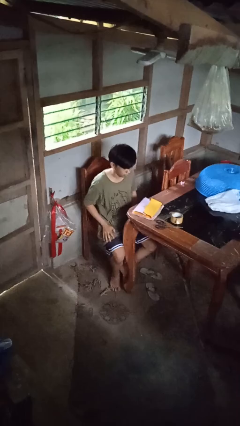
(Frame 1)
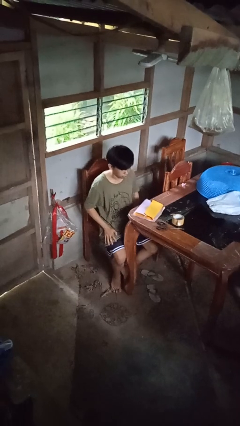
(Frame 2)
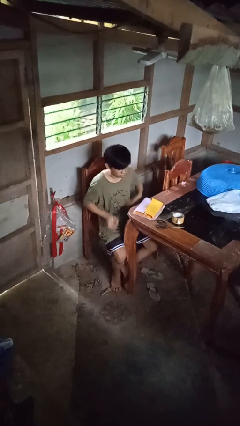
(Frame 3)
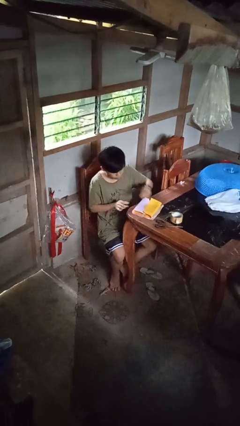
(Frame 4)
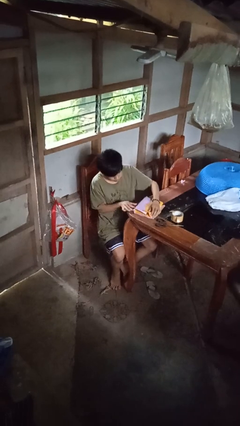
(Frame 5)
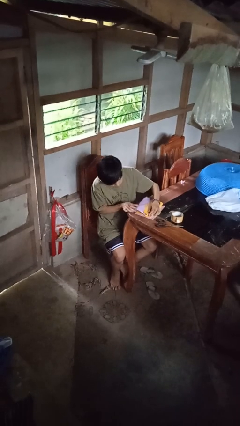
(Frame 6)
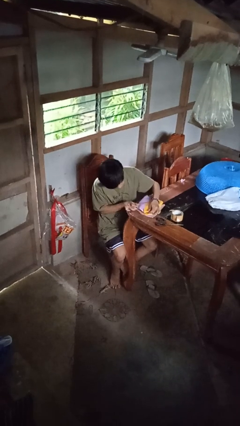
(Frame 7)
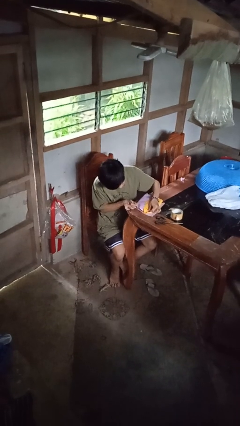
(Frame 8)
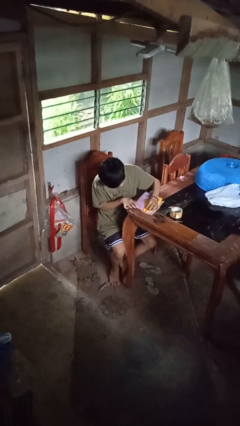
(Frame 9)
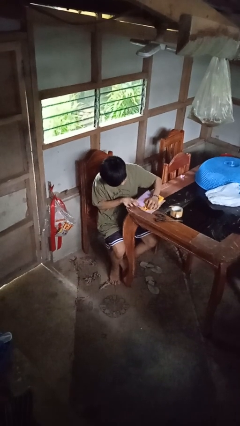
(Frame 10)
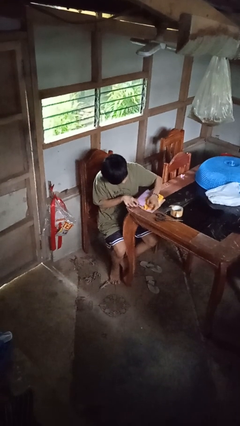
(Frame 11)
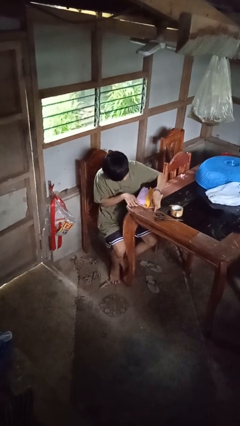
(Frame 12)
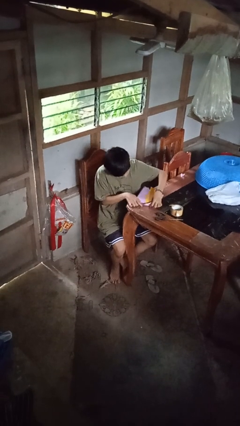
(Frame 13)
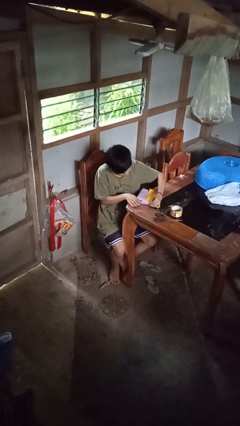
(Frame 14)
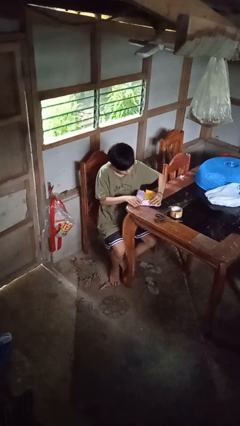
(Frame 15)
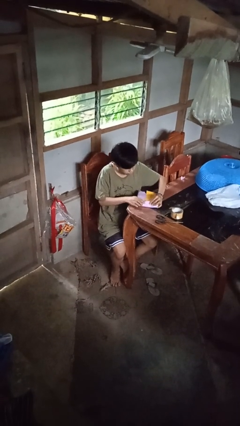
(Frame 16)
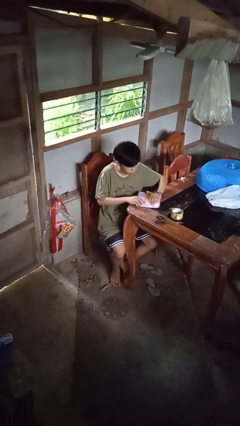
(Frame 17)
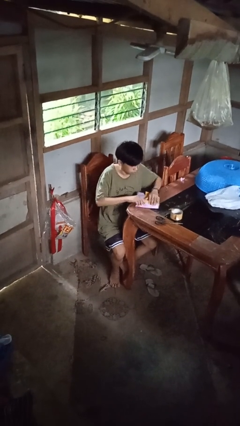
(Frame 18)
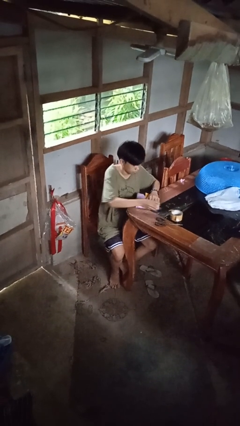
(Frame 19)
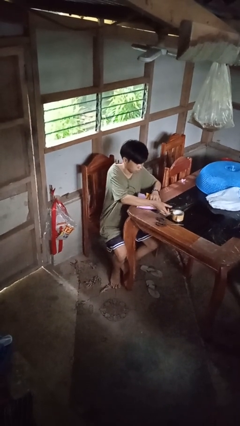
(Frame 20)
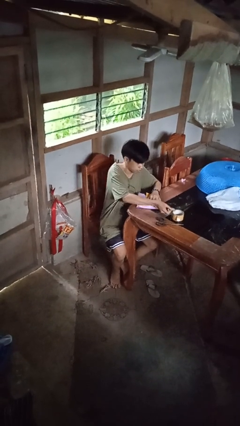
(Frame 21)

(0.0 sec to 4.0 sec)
person wraps box

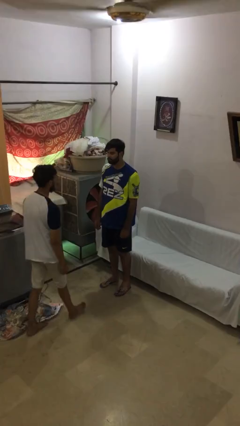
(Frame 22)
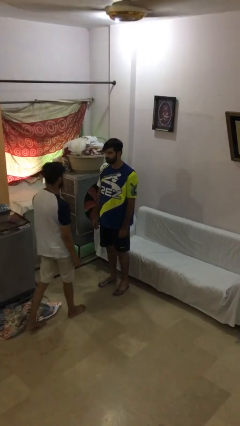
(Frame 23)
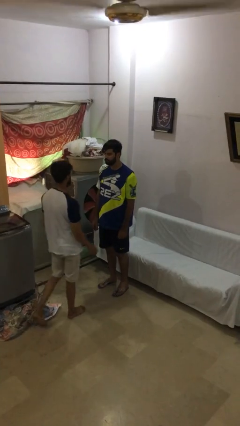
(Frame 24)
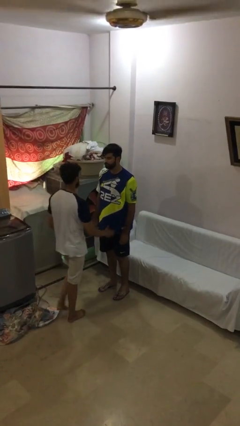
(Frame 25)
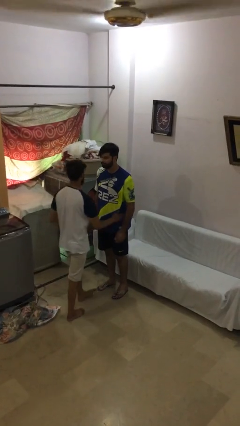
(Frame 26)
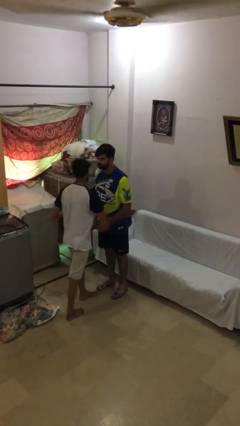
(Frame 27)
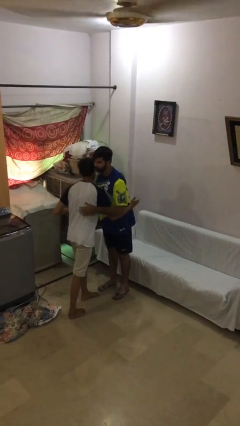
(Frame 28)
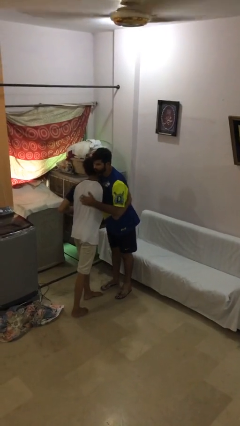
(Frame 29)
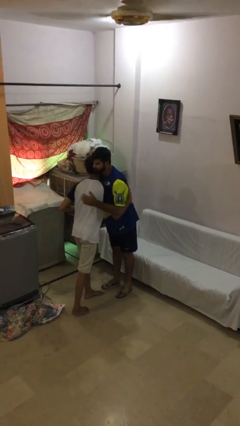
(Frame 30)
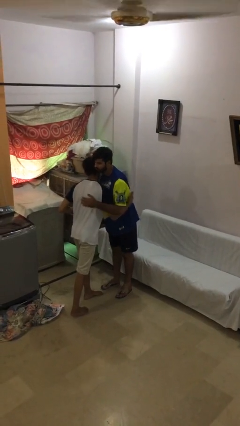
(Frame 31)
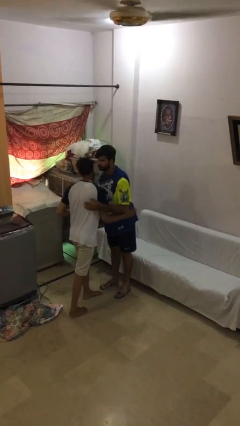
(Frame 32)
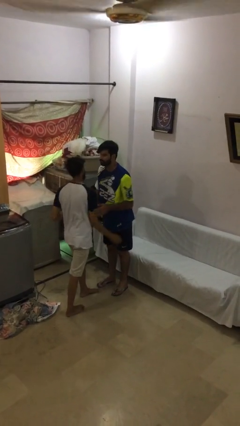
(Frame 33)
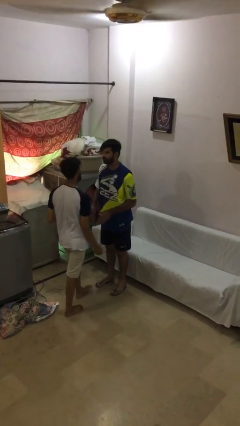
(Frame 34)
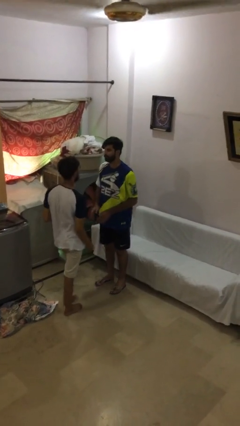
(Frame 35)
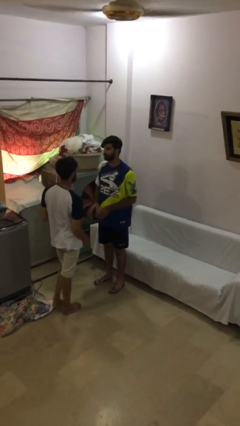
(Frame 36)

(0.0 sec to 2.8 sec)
person embraces person

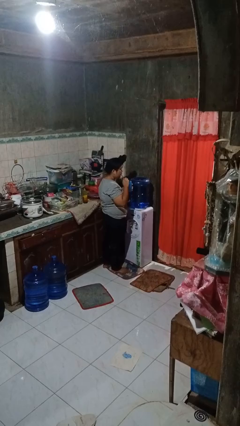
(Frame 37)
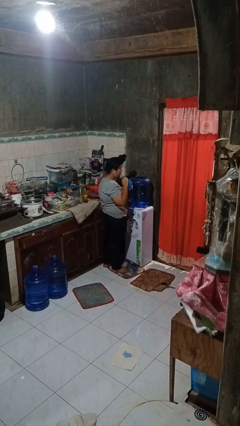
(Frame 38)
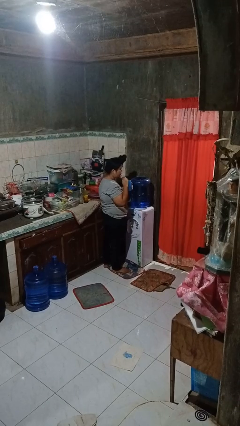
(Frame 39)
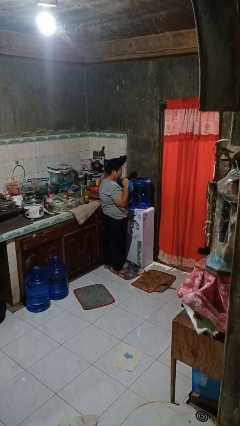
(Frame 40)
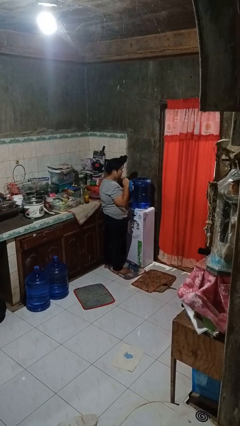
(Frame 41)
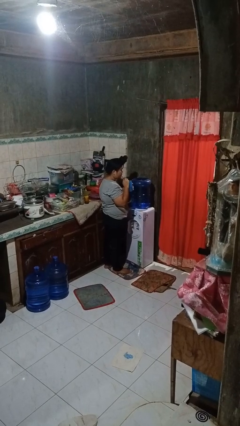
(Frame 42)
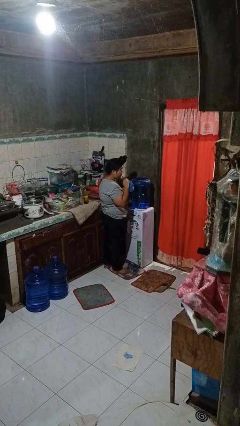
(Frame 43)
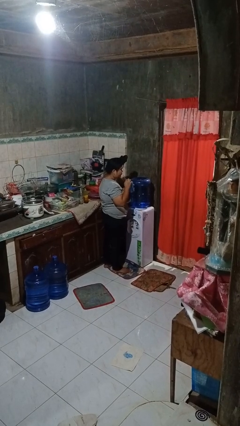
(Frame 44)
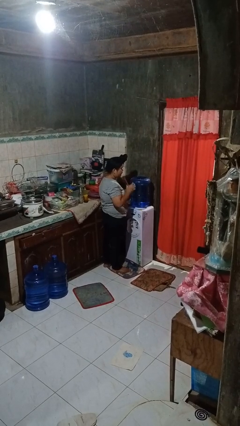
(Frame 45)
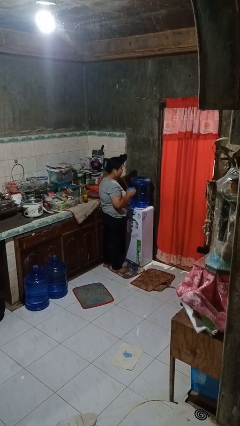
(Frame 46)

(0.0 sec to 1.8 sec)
person drinks from straw

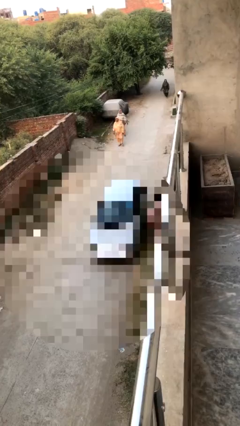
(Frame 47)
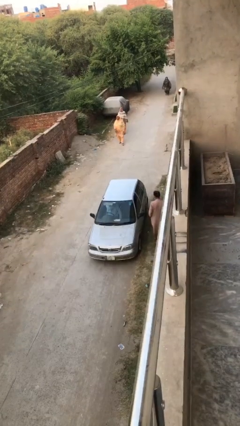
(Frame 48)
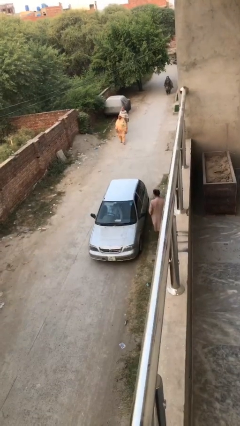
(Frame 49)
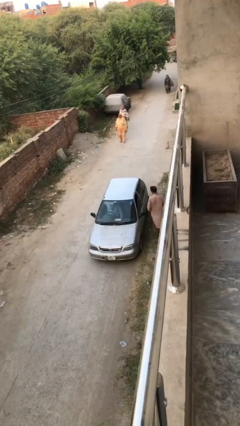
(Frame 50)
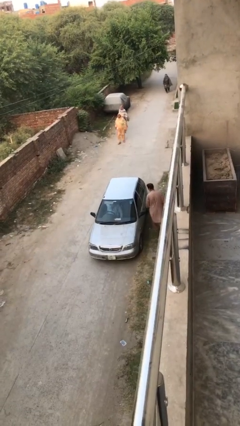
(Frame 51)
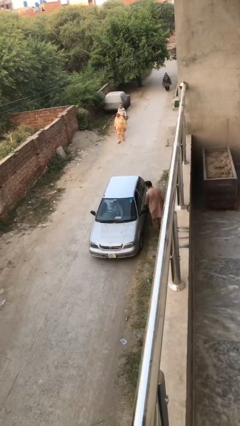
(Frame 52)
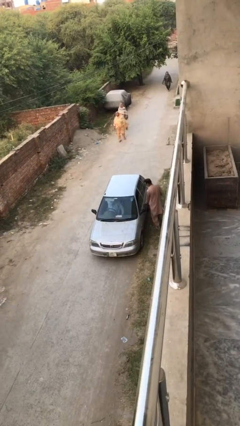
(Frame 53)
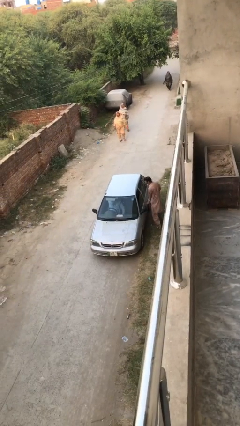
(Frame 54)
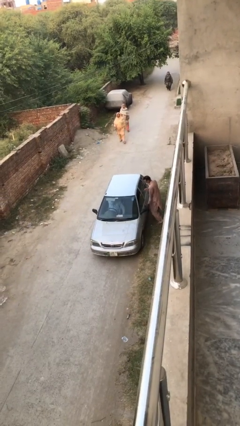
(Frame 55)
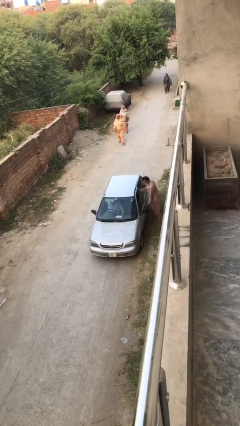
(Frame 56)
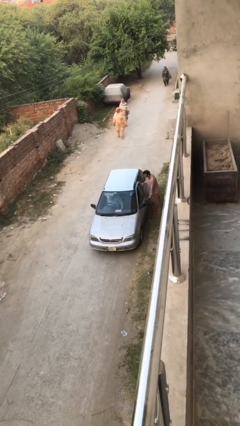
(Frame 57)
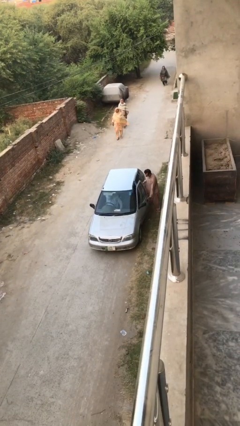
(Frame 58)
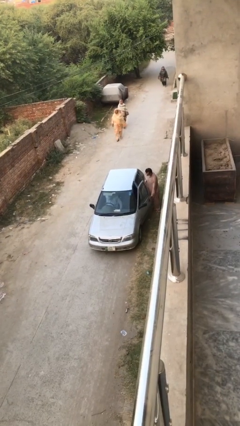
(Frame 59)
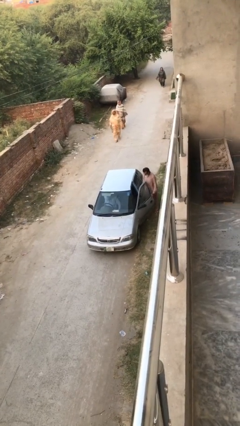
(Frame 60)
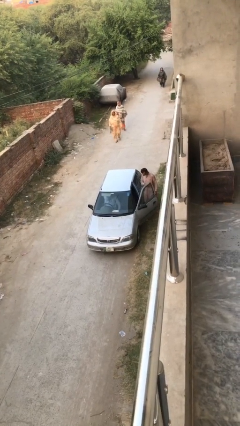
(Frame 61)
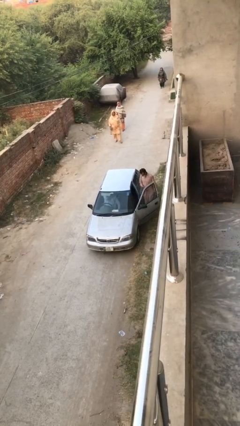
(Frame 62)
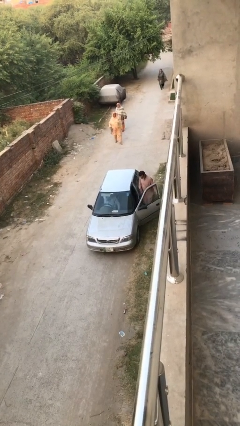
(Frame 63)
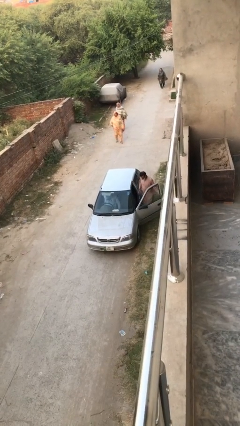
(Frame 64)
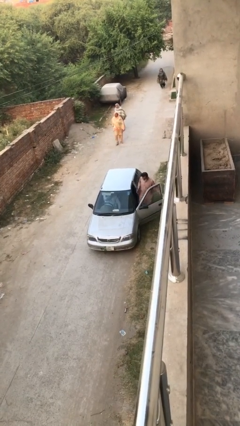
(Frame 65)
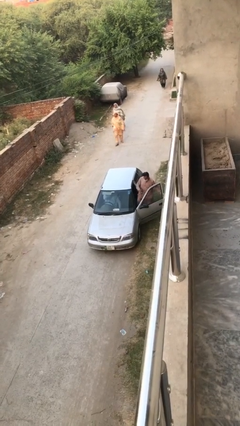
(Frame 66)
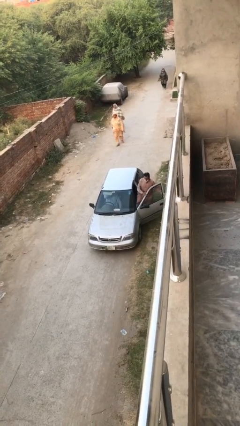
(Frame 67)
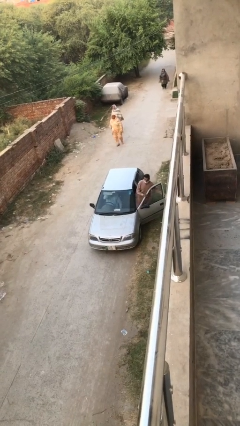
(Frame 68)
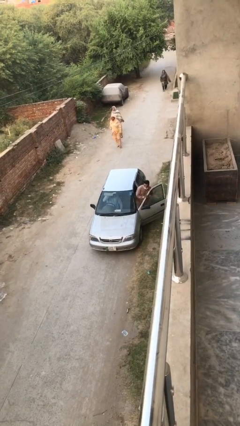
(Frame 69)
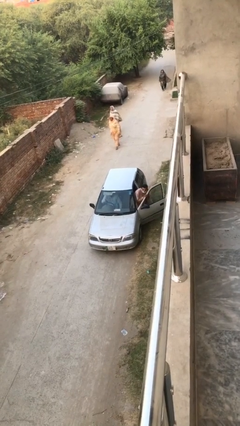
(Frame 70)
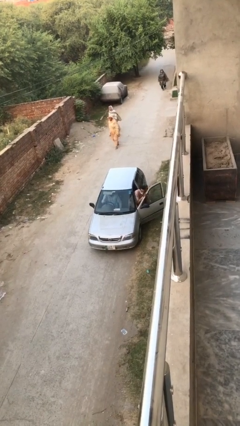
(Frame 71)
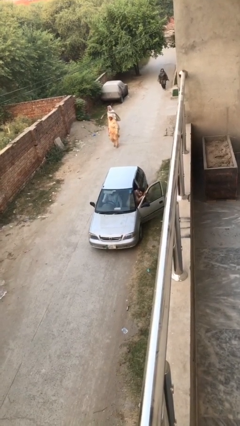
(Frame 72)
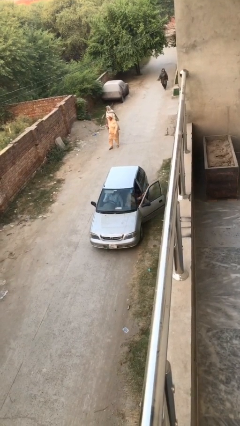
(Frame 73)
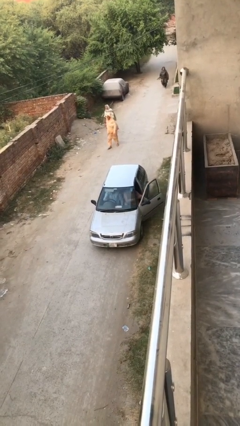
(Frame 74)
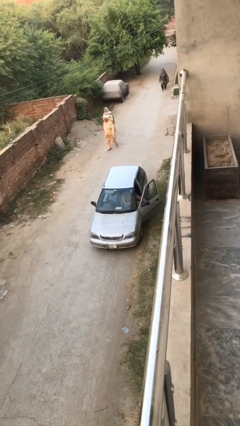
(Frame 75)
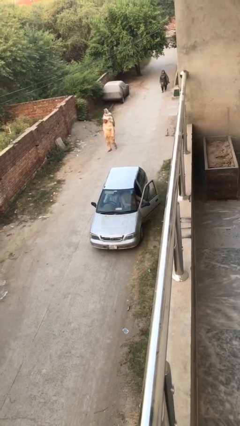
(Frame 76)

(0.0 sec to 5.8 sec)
car picks up person

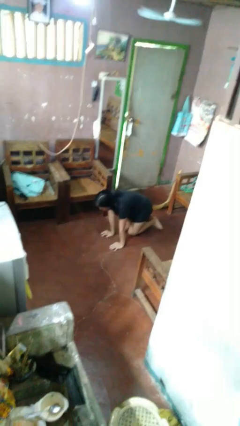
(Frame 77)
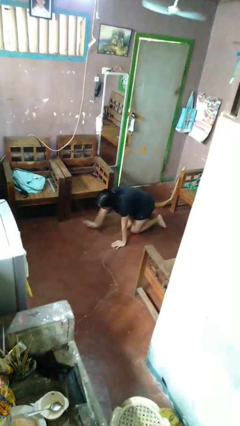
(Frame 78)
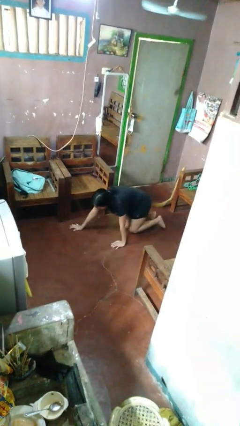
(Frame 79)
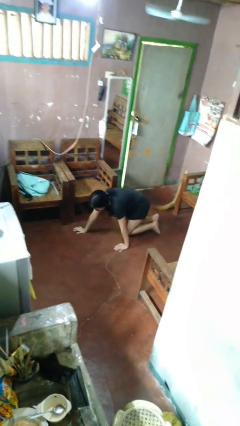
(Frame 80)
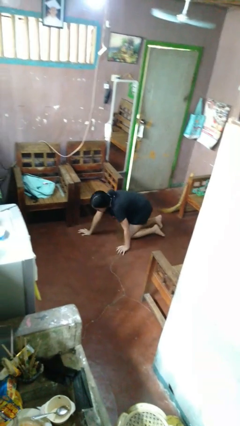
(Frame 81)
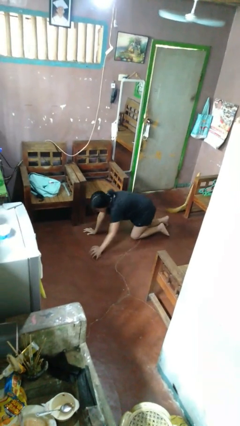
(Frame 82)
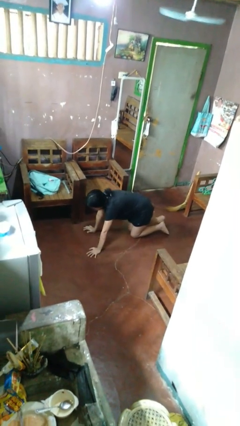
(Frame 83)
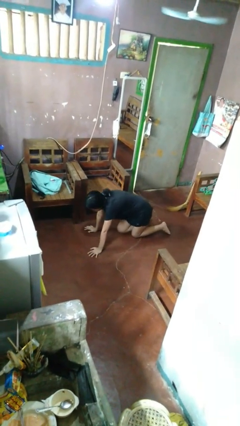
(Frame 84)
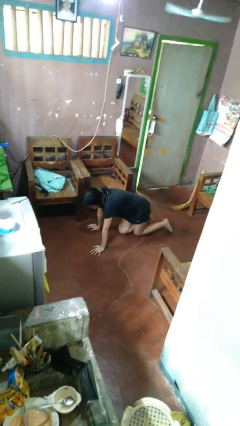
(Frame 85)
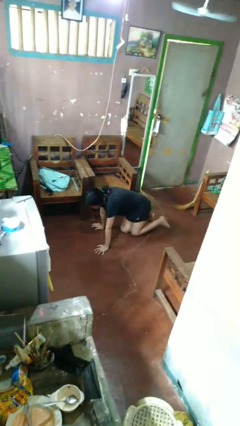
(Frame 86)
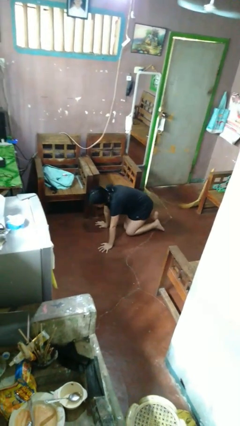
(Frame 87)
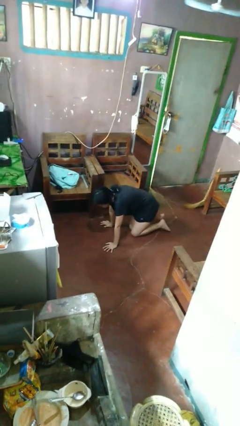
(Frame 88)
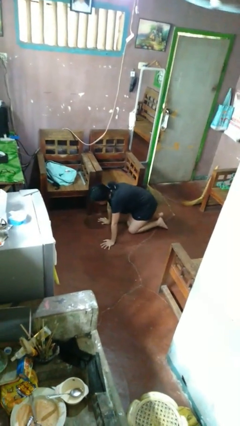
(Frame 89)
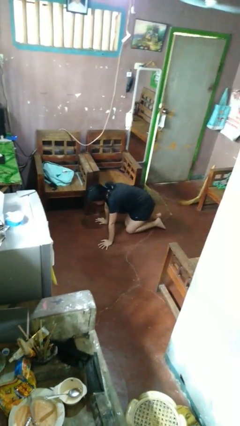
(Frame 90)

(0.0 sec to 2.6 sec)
person crawls

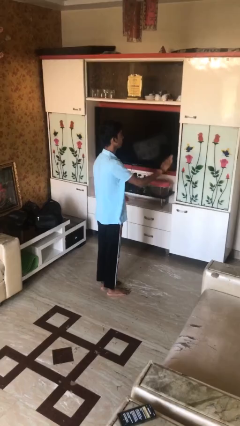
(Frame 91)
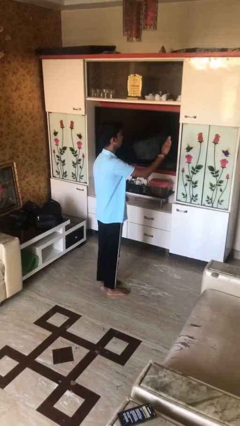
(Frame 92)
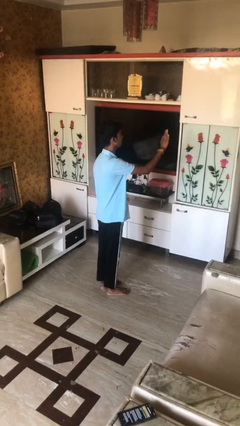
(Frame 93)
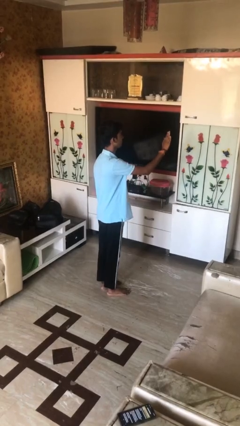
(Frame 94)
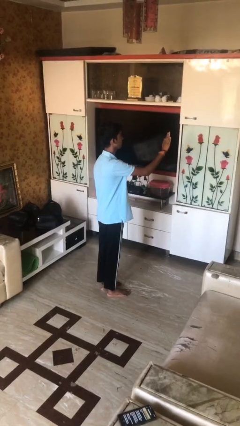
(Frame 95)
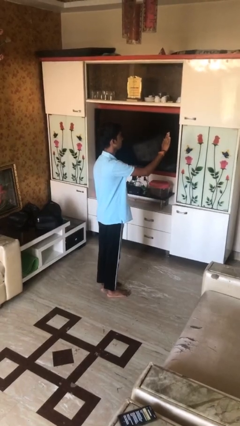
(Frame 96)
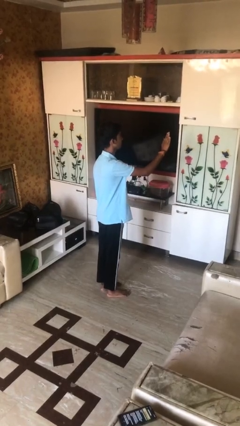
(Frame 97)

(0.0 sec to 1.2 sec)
person gestures swipe up
